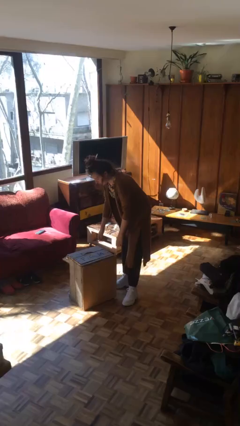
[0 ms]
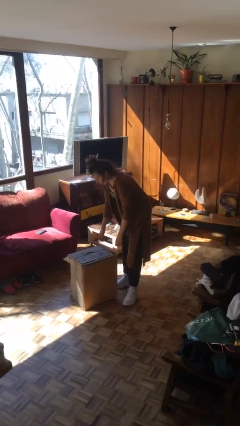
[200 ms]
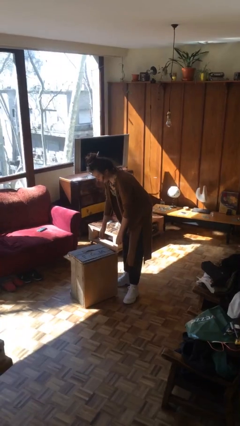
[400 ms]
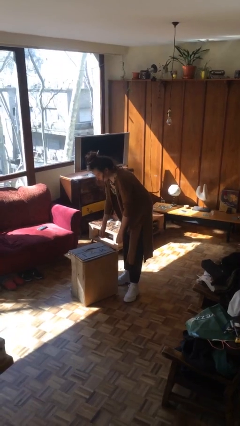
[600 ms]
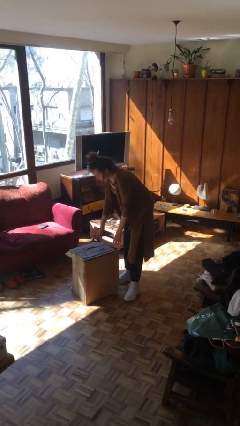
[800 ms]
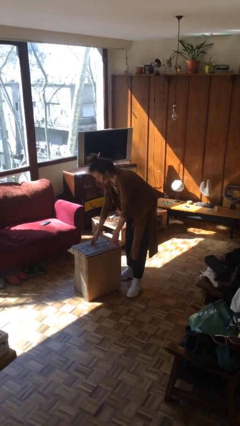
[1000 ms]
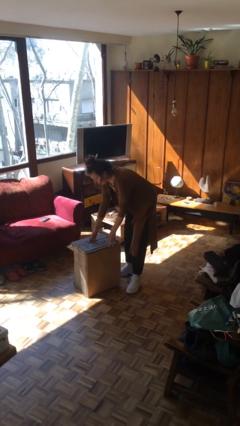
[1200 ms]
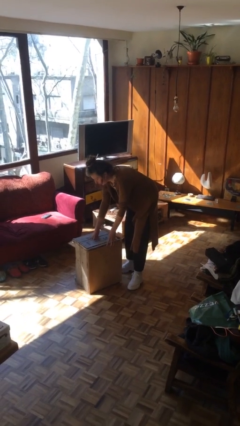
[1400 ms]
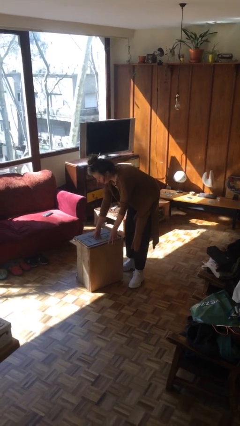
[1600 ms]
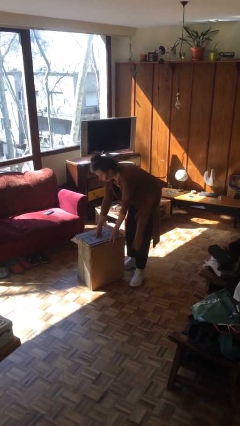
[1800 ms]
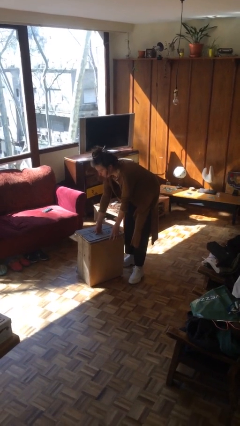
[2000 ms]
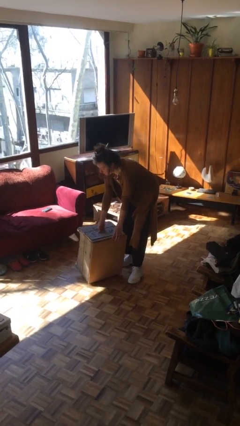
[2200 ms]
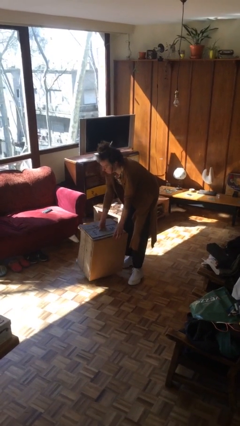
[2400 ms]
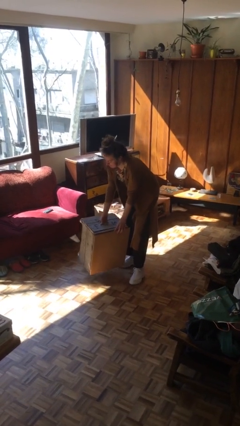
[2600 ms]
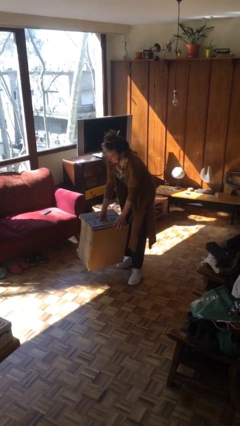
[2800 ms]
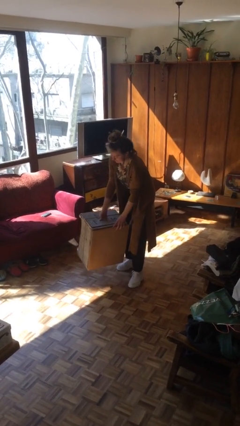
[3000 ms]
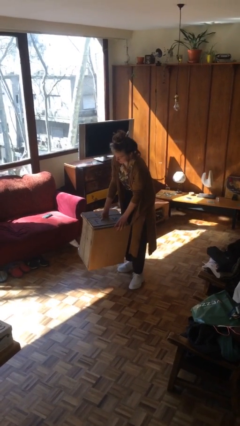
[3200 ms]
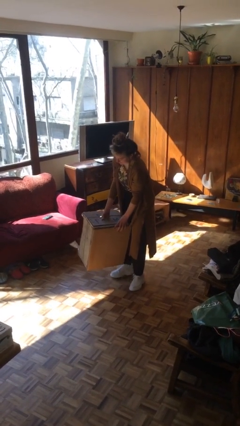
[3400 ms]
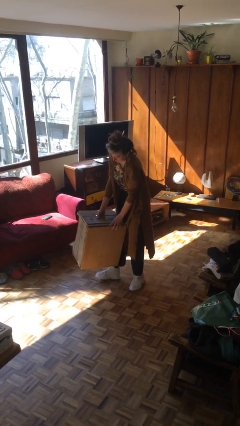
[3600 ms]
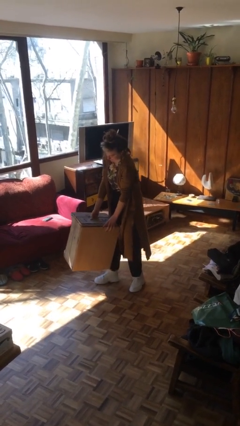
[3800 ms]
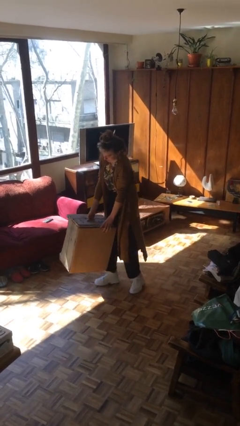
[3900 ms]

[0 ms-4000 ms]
person picks up object from floor

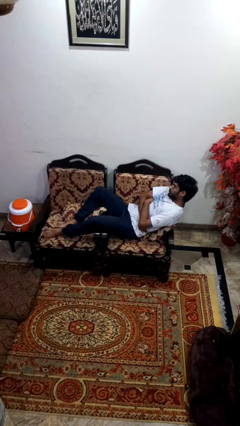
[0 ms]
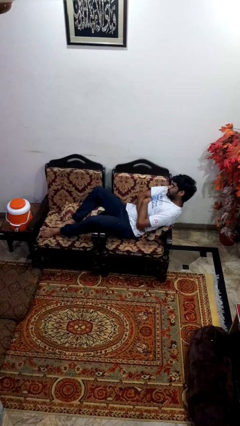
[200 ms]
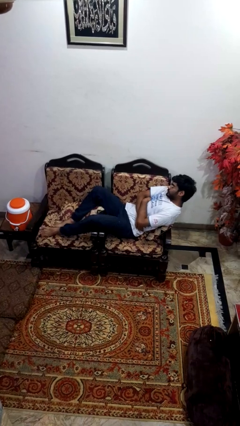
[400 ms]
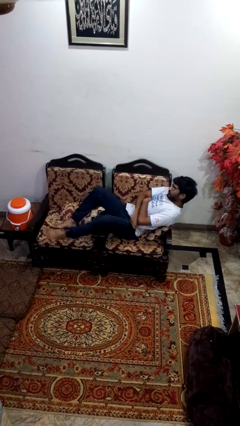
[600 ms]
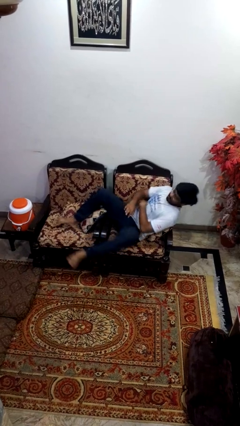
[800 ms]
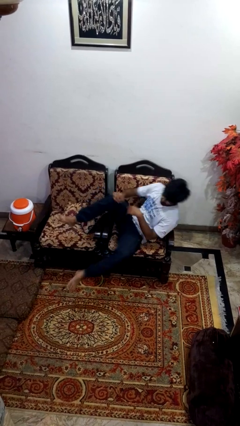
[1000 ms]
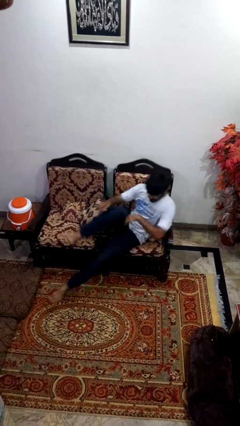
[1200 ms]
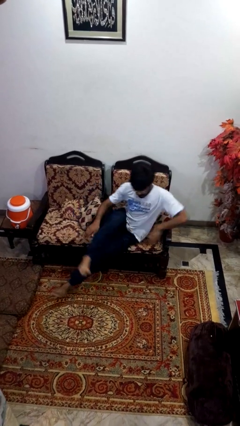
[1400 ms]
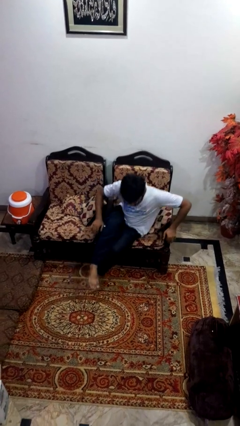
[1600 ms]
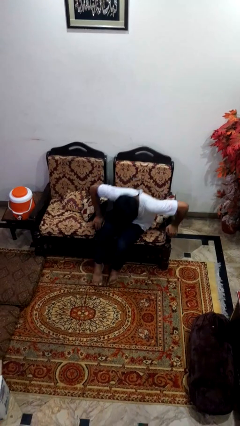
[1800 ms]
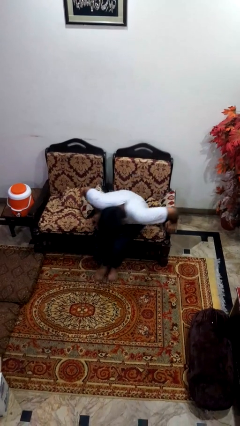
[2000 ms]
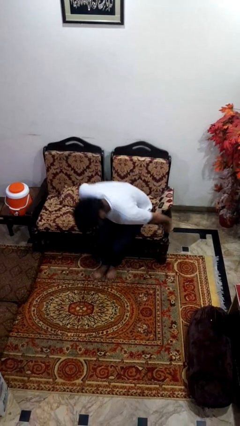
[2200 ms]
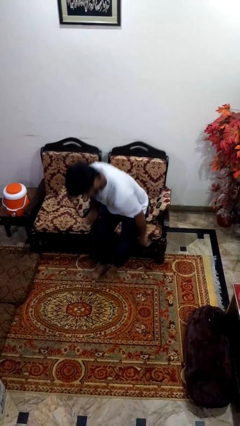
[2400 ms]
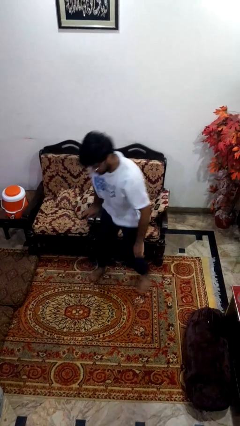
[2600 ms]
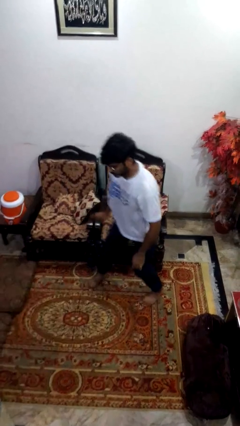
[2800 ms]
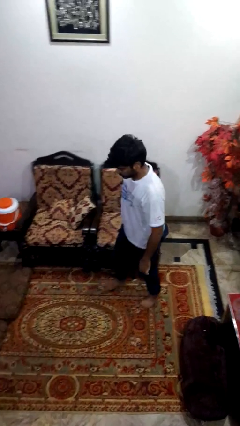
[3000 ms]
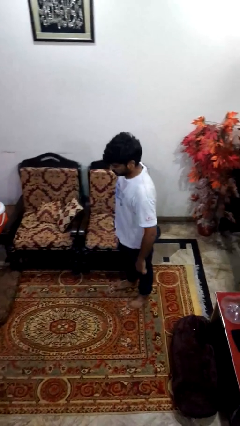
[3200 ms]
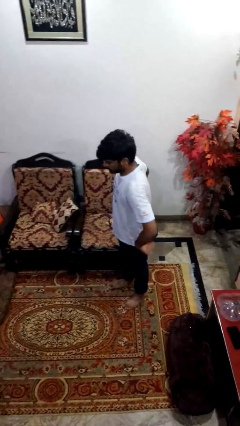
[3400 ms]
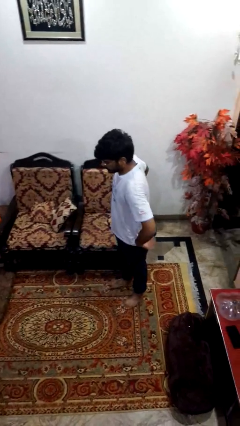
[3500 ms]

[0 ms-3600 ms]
person stands up

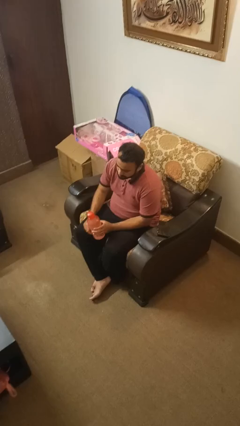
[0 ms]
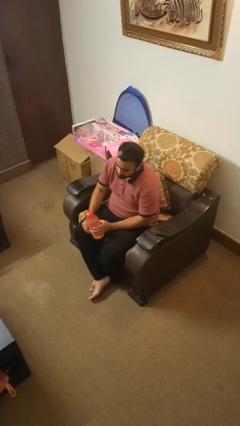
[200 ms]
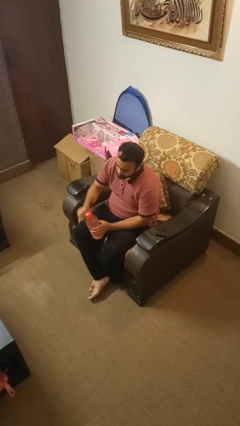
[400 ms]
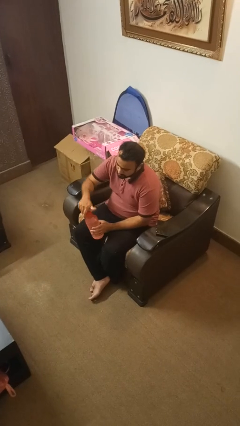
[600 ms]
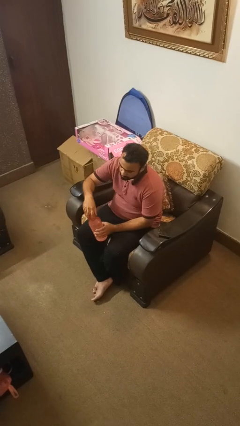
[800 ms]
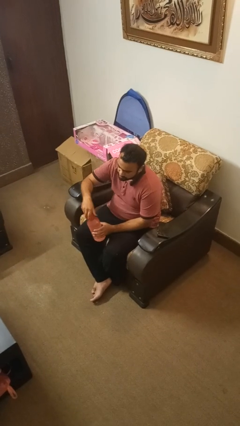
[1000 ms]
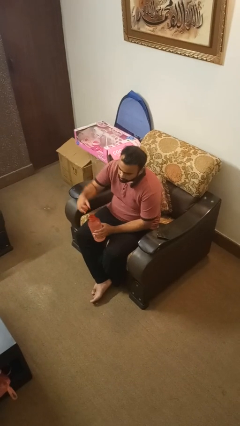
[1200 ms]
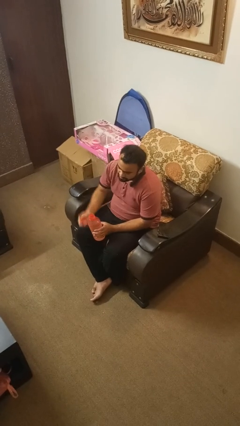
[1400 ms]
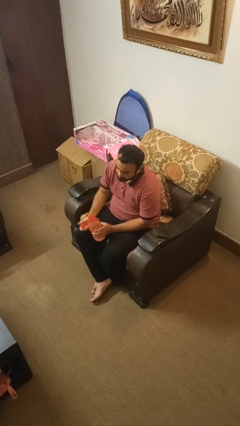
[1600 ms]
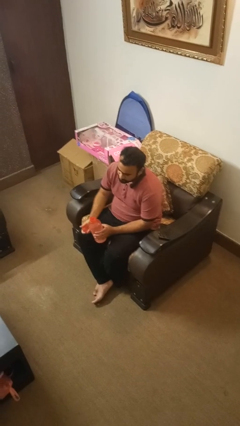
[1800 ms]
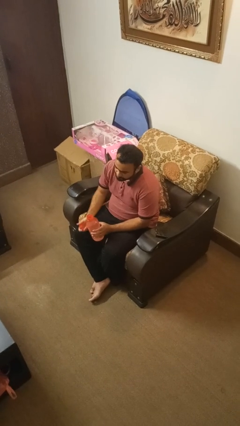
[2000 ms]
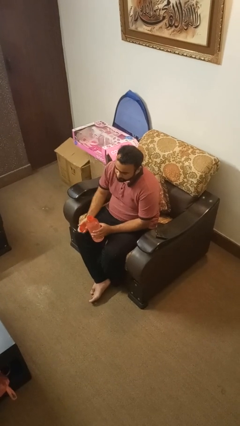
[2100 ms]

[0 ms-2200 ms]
person unscrews lid from bottle

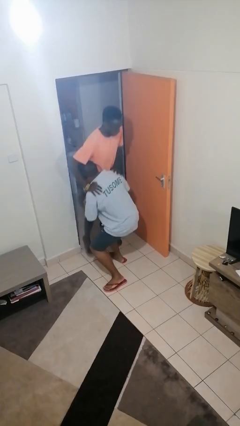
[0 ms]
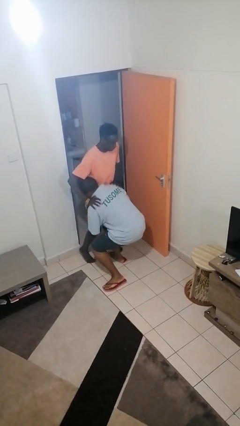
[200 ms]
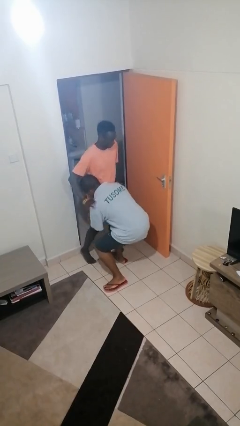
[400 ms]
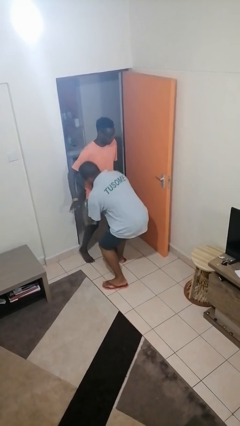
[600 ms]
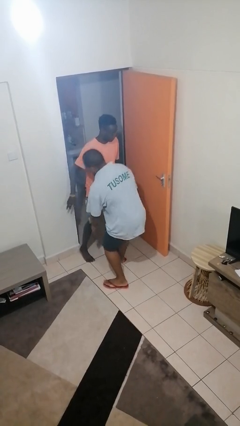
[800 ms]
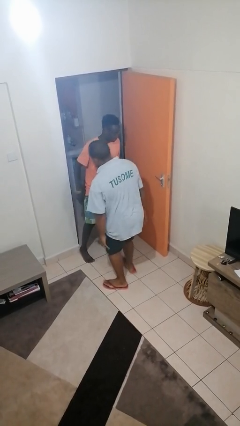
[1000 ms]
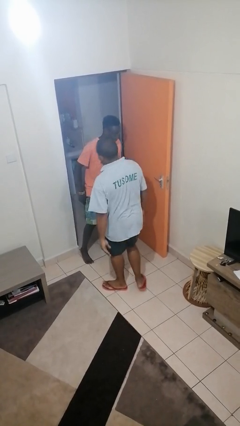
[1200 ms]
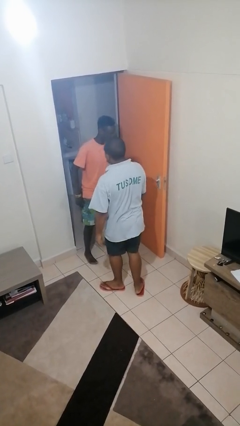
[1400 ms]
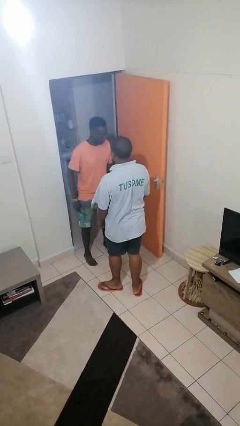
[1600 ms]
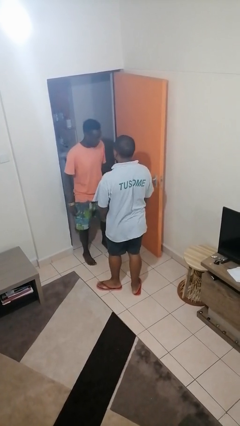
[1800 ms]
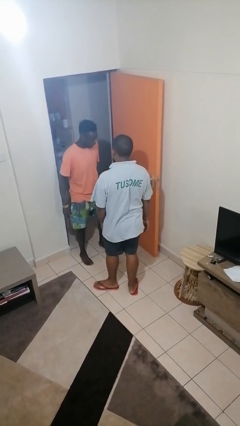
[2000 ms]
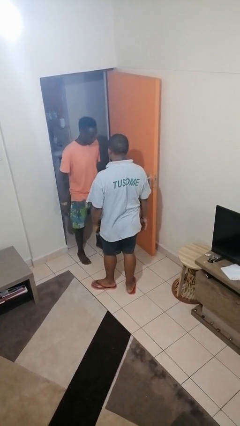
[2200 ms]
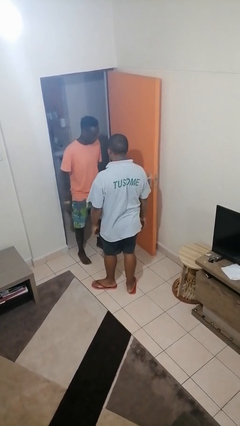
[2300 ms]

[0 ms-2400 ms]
person puts down person

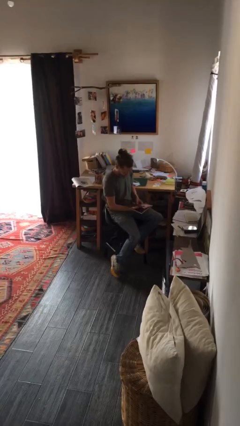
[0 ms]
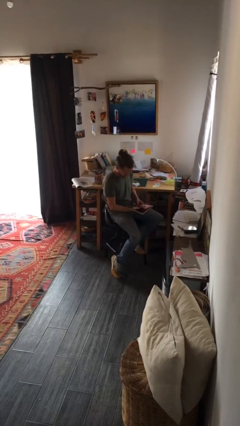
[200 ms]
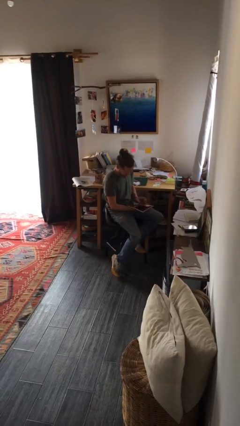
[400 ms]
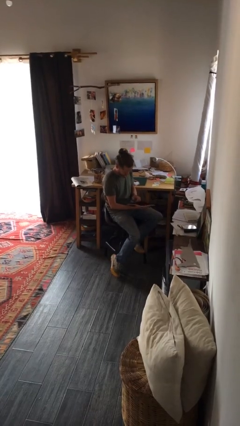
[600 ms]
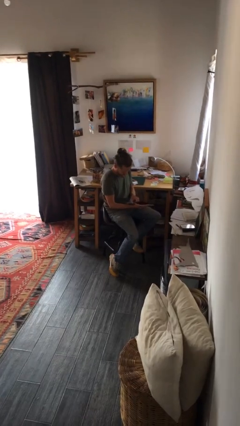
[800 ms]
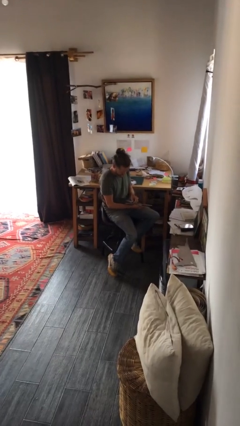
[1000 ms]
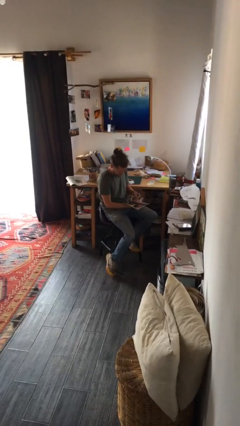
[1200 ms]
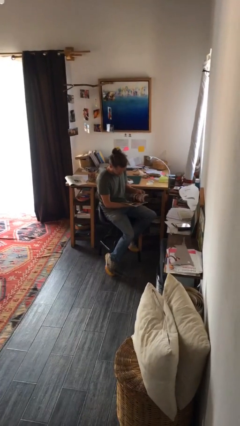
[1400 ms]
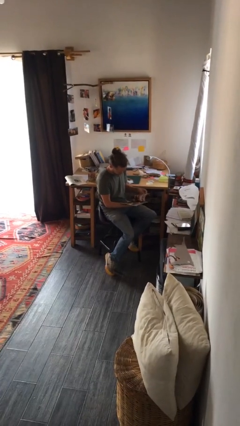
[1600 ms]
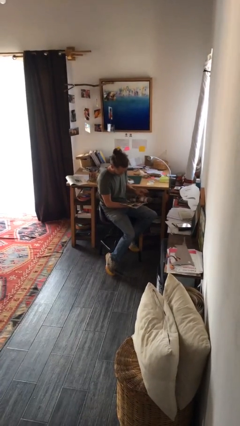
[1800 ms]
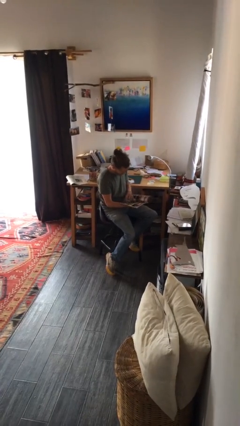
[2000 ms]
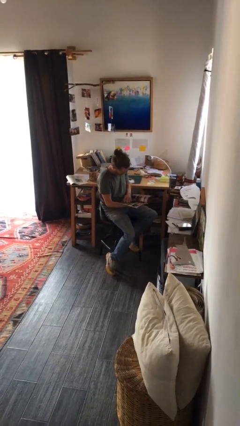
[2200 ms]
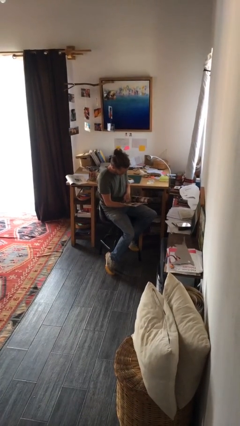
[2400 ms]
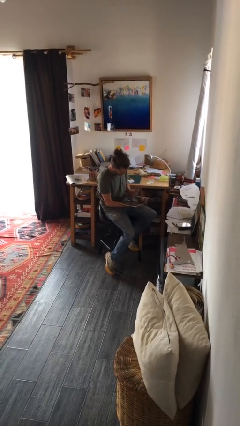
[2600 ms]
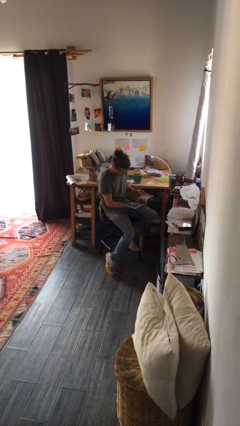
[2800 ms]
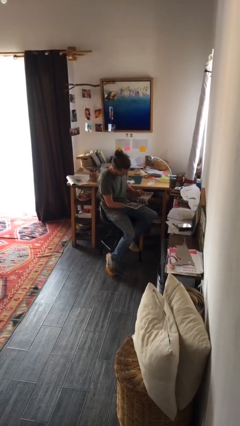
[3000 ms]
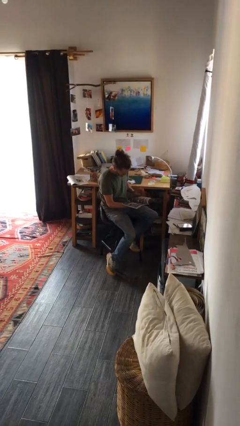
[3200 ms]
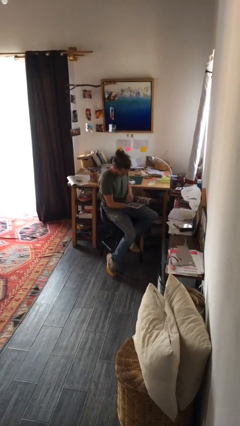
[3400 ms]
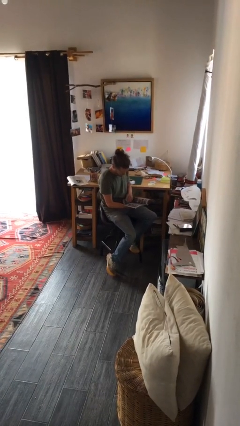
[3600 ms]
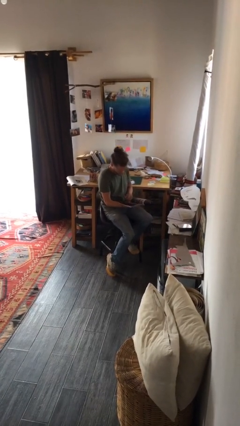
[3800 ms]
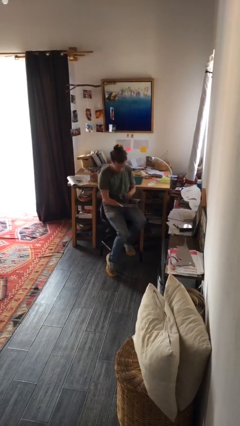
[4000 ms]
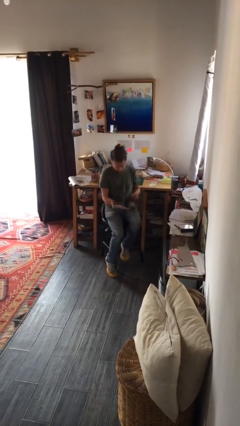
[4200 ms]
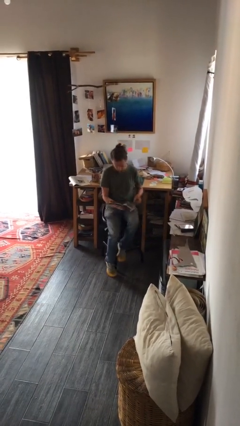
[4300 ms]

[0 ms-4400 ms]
person reads magazine

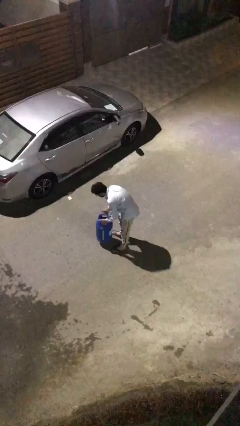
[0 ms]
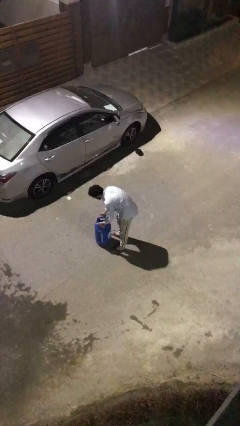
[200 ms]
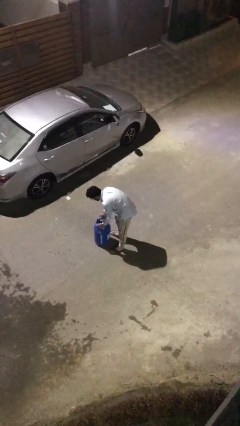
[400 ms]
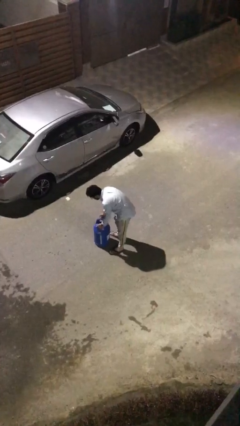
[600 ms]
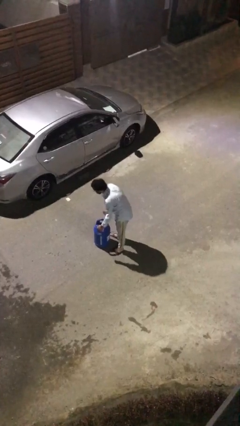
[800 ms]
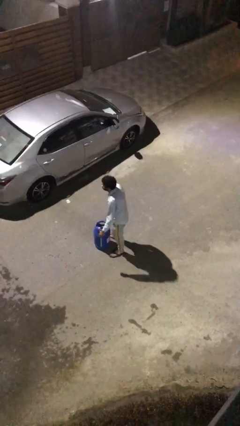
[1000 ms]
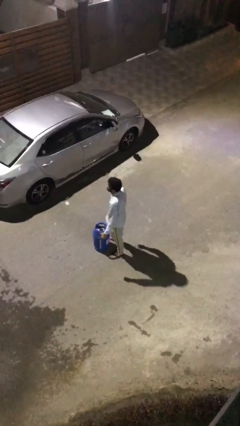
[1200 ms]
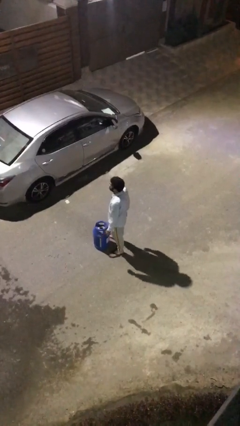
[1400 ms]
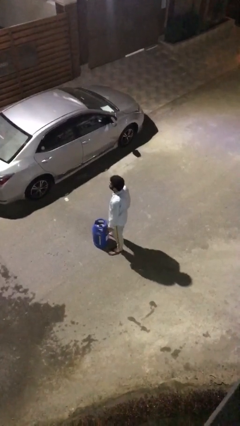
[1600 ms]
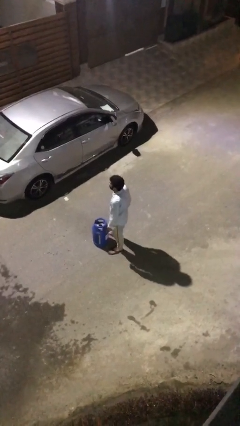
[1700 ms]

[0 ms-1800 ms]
person puts down object on floor
